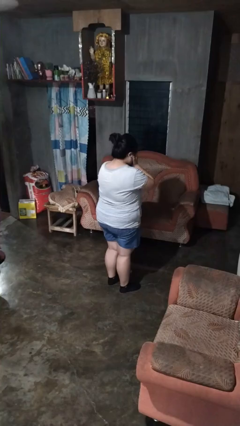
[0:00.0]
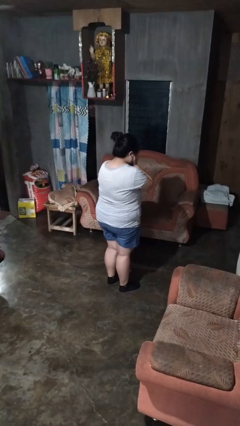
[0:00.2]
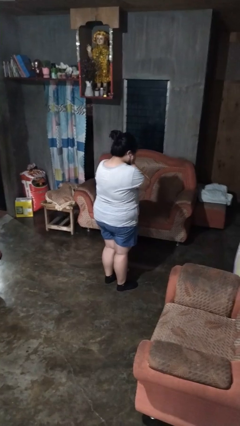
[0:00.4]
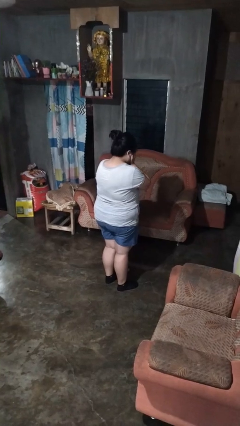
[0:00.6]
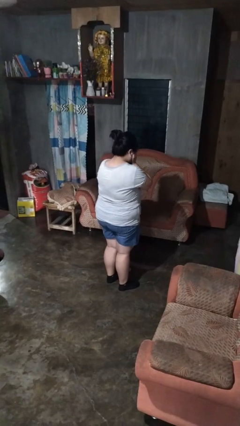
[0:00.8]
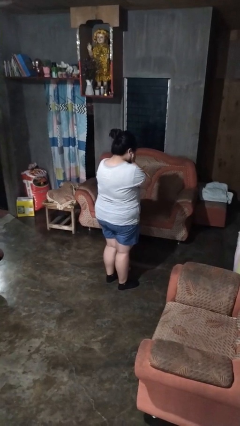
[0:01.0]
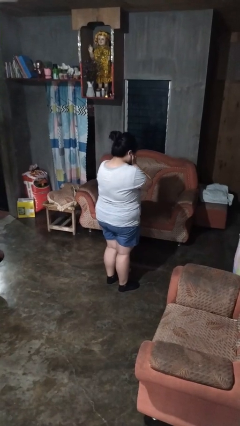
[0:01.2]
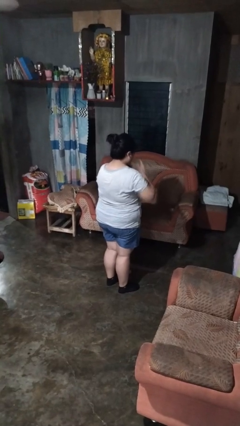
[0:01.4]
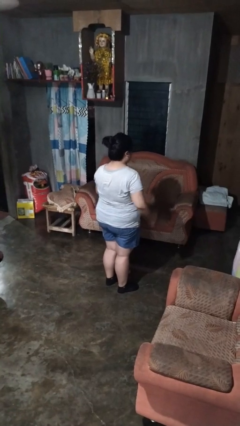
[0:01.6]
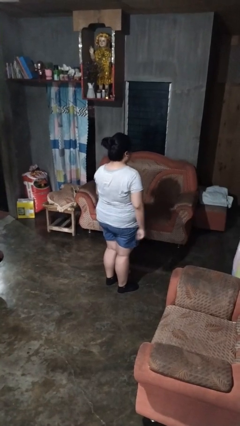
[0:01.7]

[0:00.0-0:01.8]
person covers face with hands

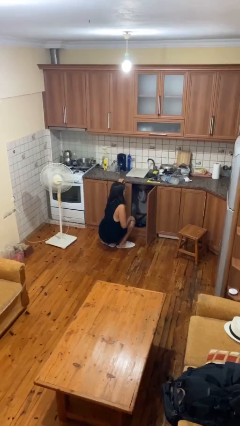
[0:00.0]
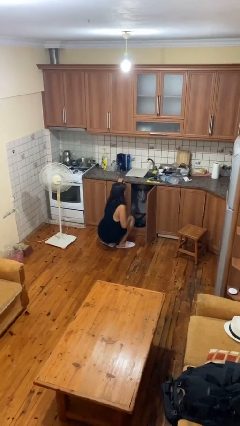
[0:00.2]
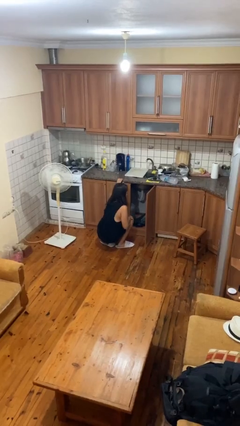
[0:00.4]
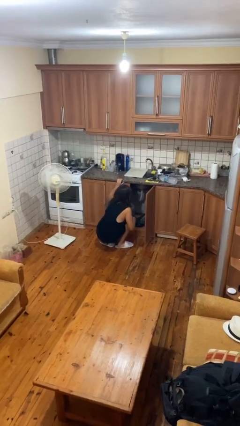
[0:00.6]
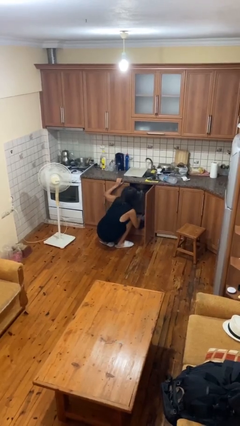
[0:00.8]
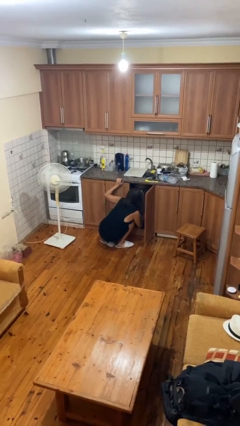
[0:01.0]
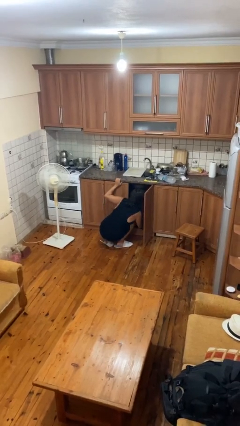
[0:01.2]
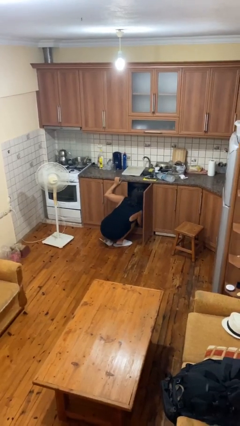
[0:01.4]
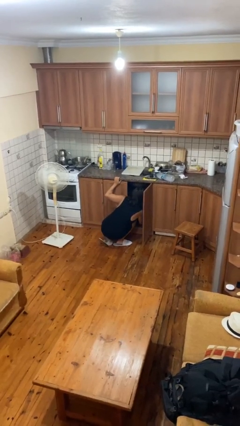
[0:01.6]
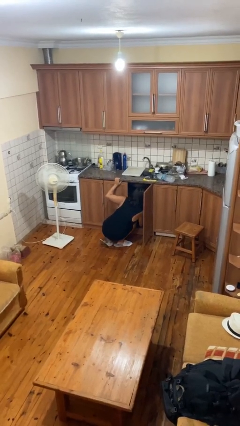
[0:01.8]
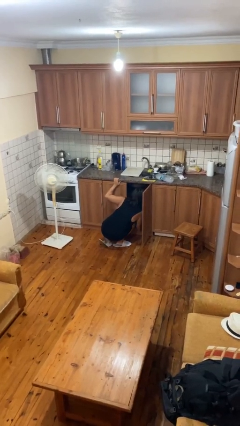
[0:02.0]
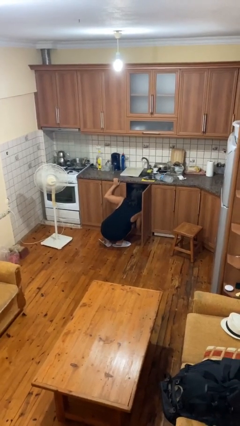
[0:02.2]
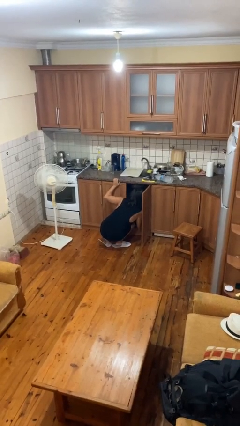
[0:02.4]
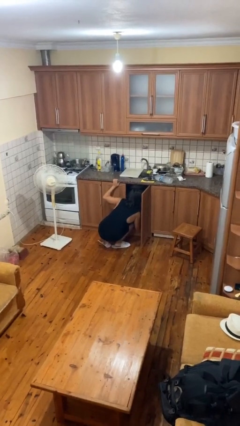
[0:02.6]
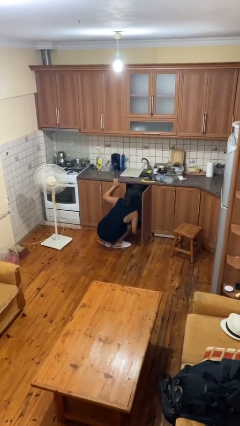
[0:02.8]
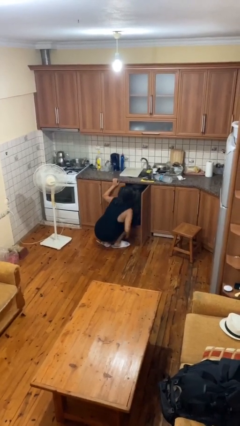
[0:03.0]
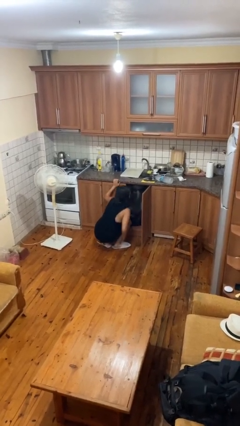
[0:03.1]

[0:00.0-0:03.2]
person searches in cabinet

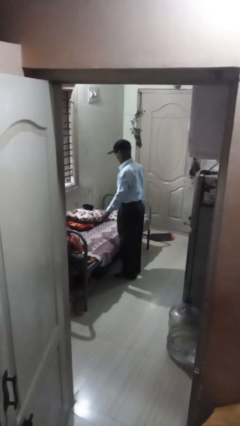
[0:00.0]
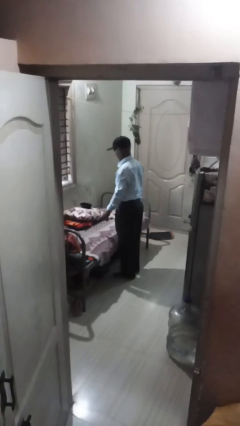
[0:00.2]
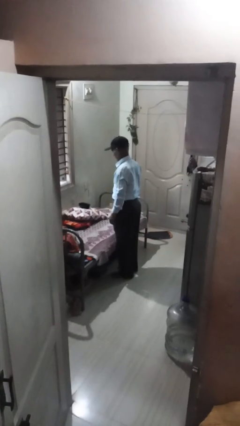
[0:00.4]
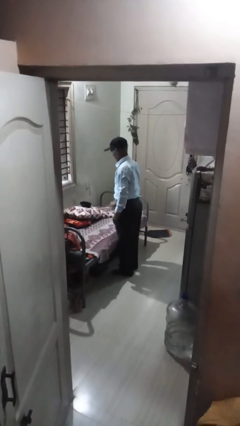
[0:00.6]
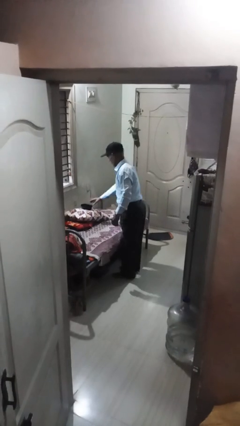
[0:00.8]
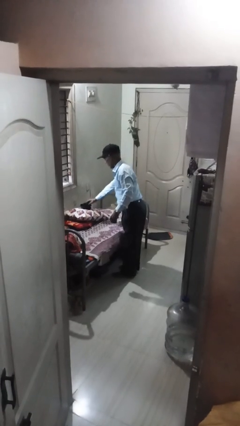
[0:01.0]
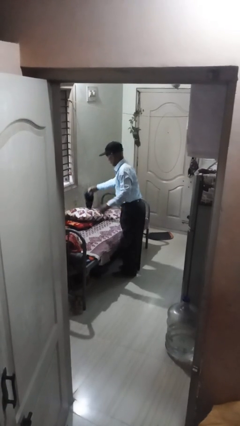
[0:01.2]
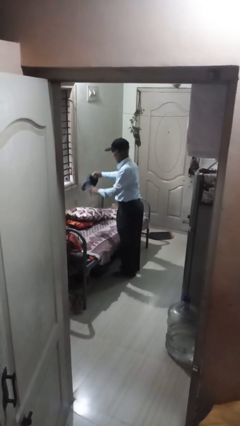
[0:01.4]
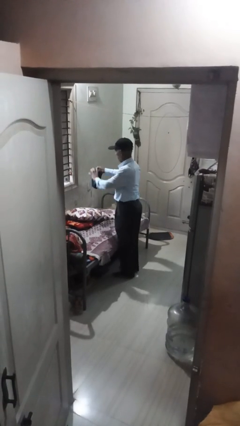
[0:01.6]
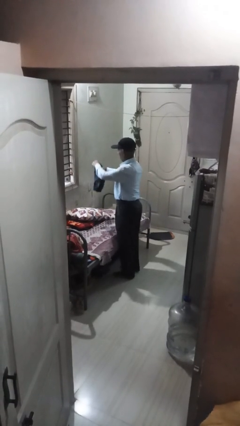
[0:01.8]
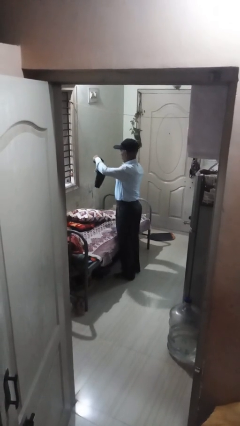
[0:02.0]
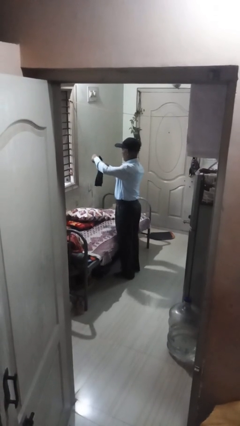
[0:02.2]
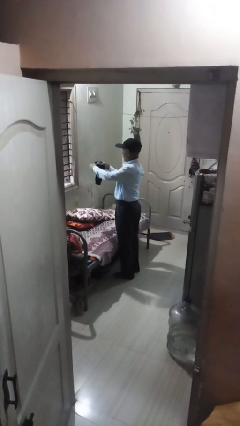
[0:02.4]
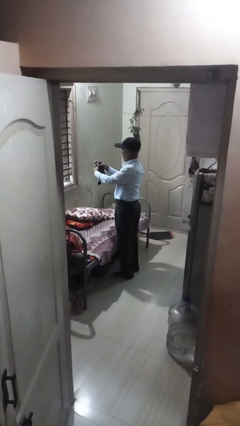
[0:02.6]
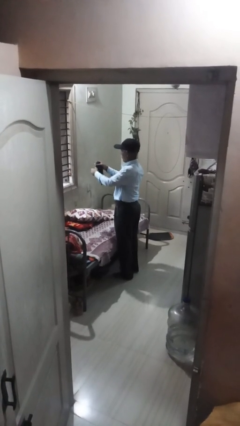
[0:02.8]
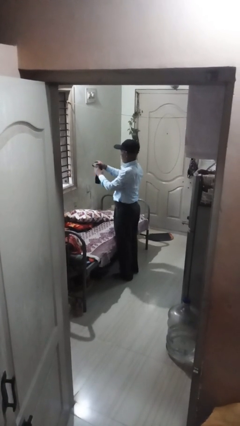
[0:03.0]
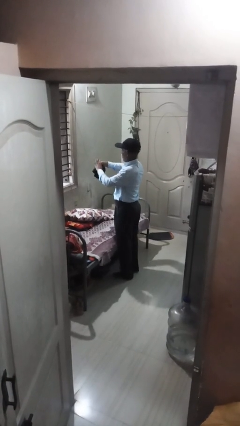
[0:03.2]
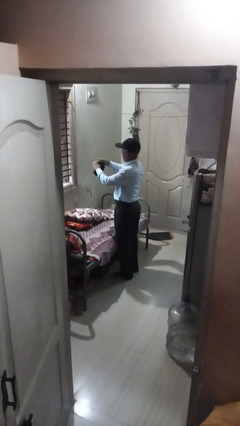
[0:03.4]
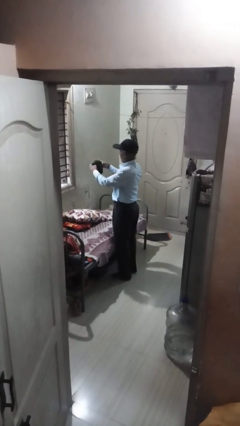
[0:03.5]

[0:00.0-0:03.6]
person folds socks

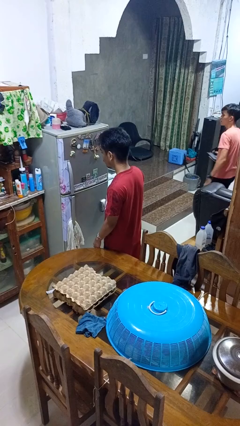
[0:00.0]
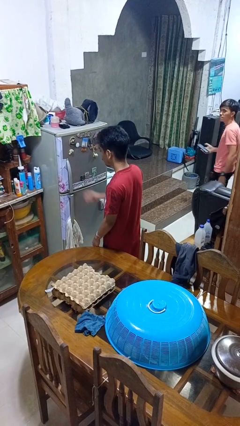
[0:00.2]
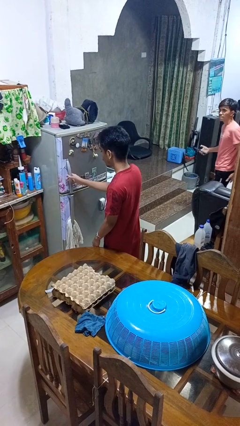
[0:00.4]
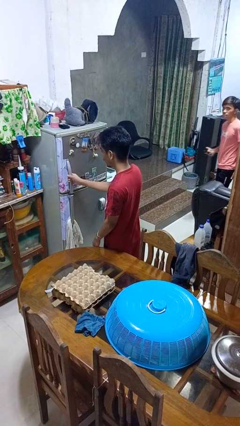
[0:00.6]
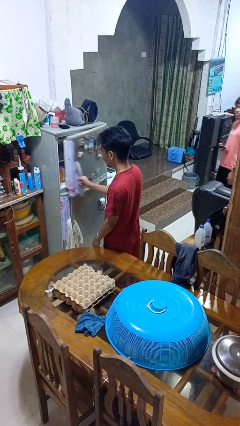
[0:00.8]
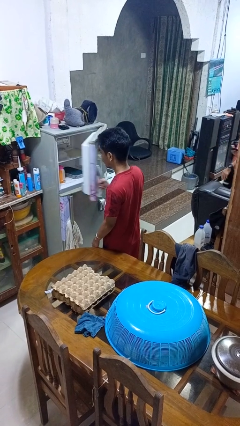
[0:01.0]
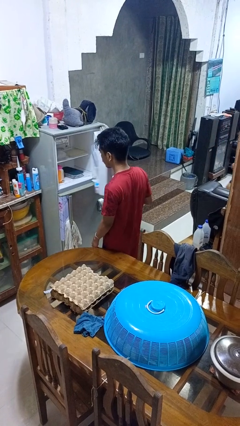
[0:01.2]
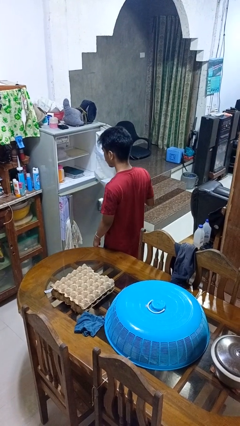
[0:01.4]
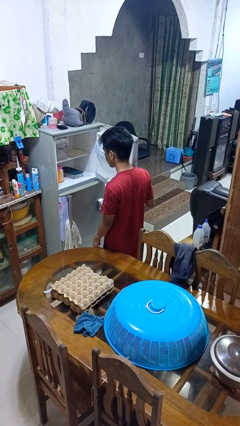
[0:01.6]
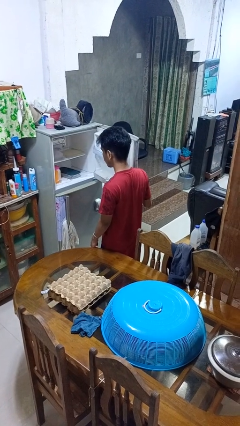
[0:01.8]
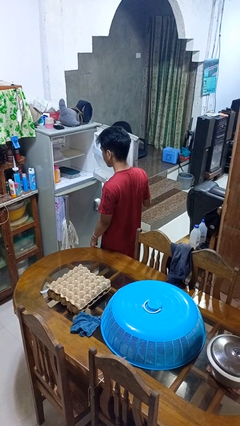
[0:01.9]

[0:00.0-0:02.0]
person opens refrigerator

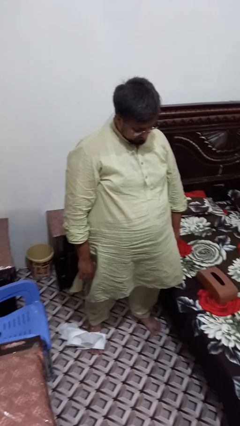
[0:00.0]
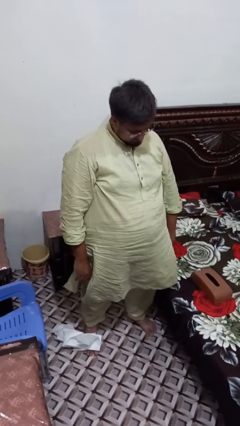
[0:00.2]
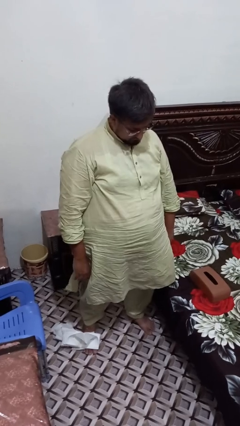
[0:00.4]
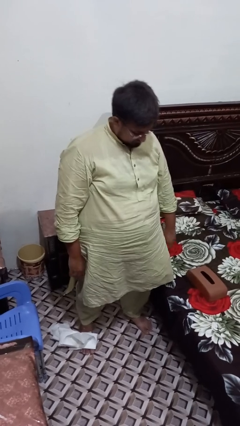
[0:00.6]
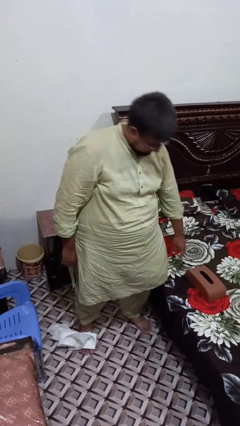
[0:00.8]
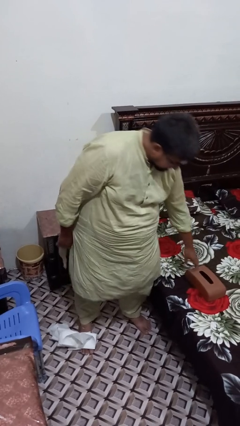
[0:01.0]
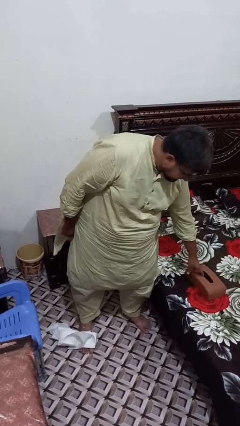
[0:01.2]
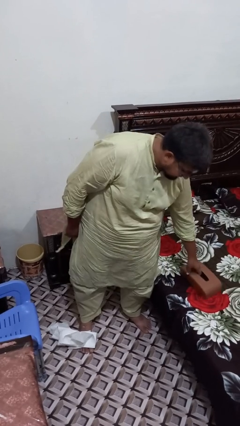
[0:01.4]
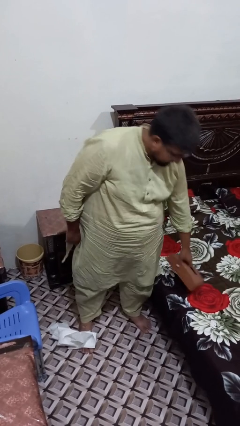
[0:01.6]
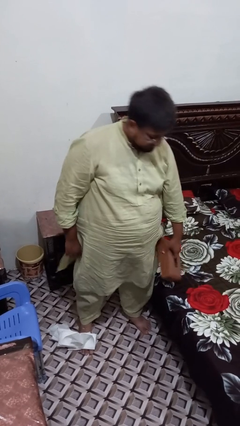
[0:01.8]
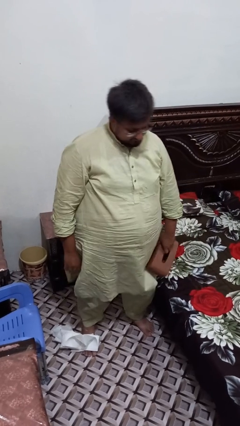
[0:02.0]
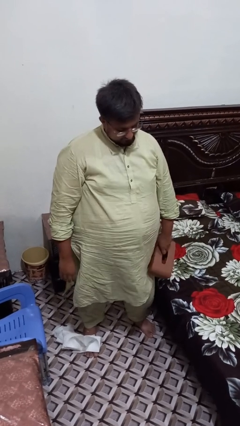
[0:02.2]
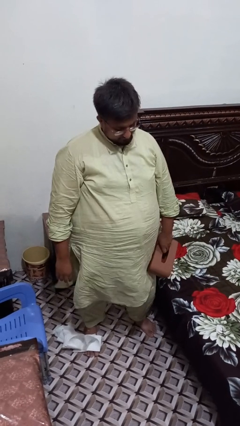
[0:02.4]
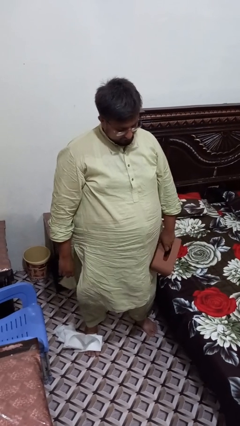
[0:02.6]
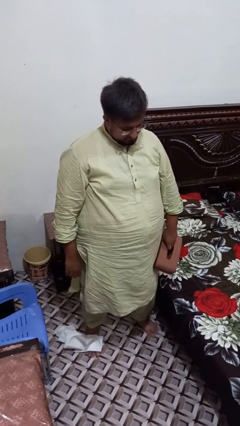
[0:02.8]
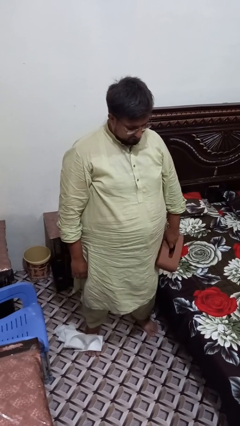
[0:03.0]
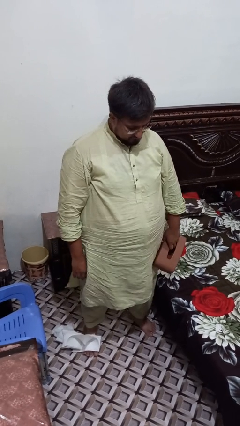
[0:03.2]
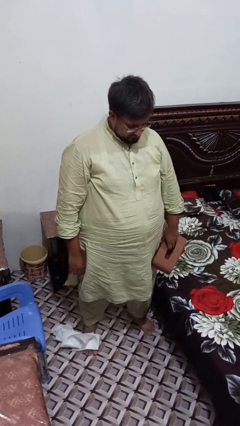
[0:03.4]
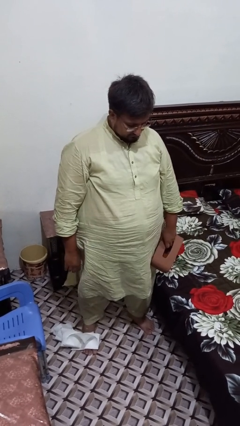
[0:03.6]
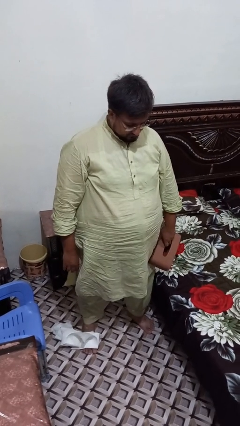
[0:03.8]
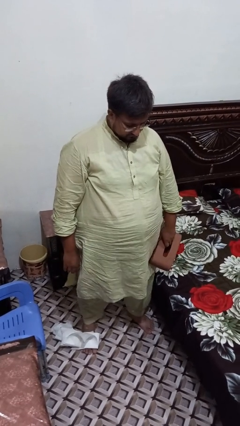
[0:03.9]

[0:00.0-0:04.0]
person picks up object from bed

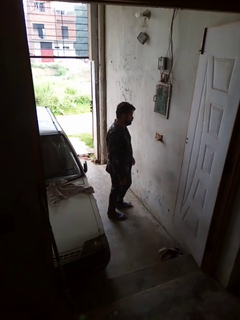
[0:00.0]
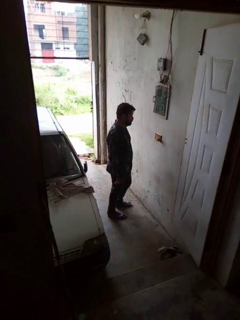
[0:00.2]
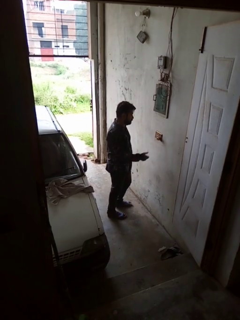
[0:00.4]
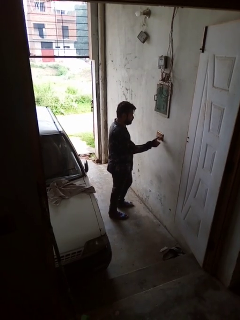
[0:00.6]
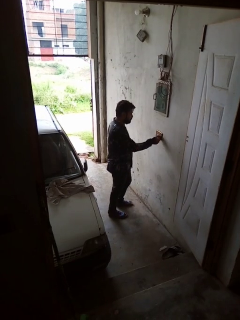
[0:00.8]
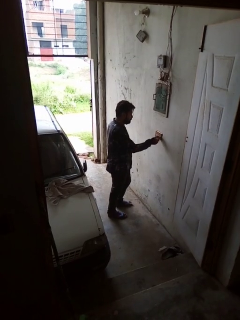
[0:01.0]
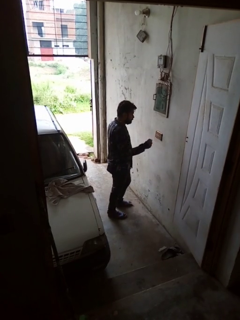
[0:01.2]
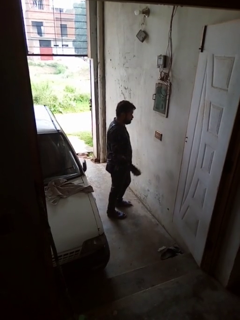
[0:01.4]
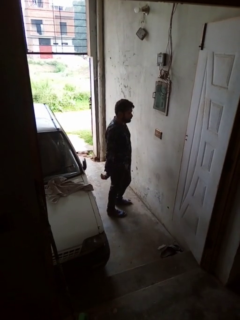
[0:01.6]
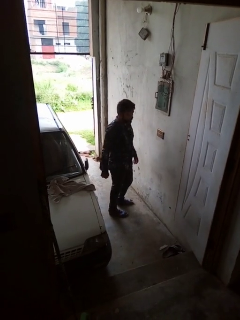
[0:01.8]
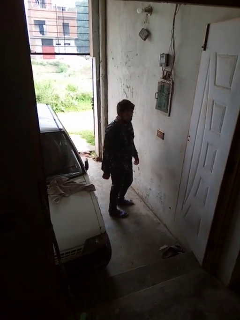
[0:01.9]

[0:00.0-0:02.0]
person unplugs from electrical socket

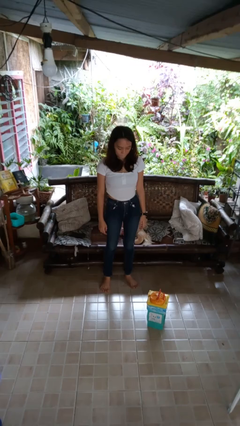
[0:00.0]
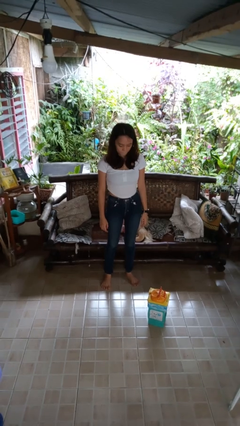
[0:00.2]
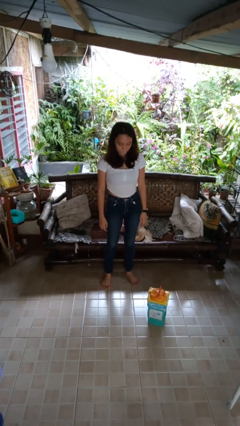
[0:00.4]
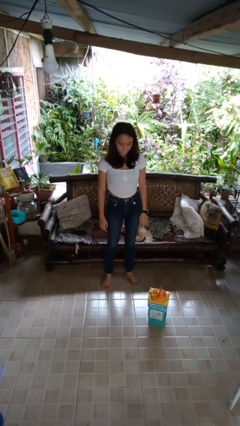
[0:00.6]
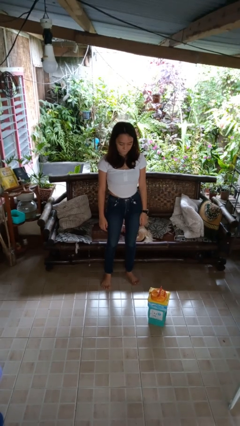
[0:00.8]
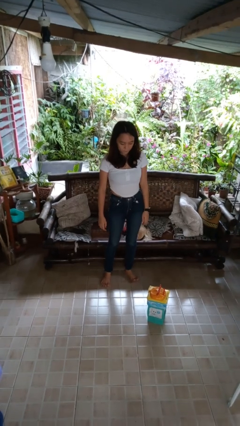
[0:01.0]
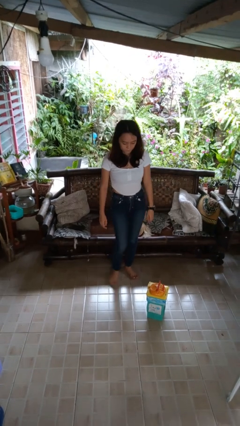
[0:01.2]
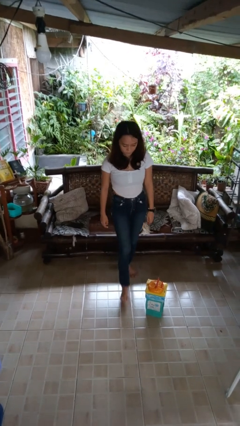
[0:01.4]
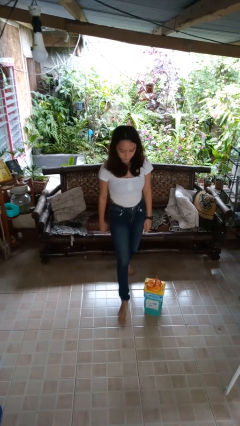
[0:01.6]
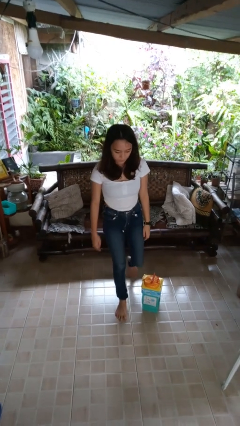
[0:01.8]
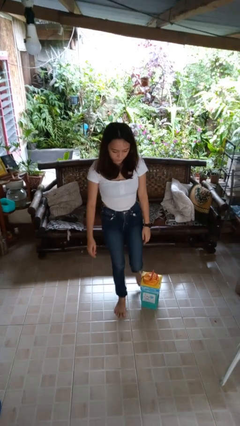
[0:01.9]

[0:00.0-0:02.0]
person trips on object on floor
